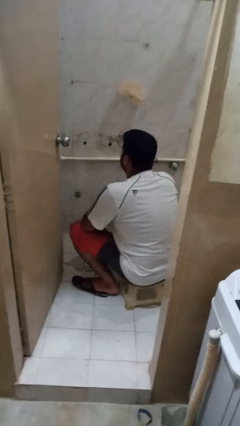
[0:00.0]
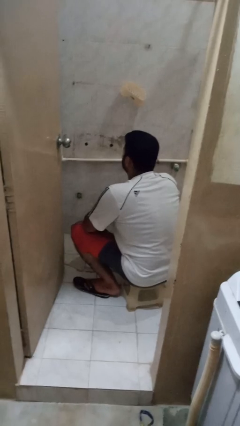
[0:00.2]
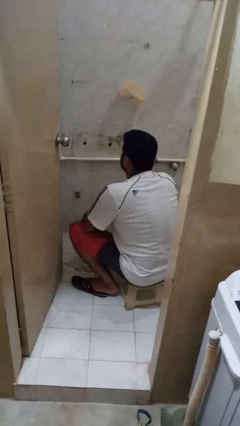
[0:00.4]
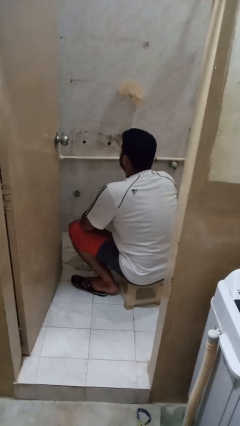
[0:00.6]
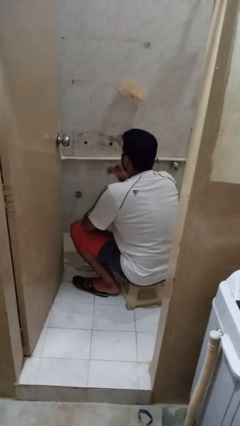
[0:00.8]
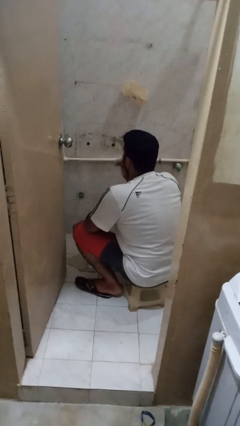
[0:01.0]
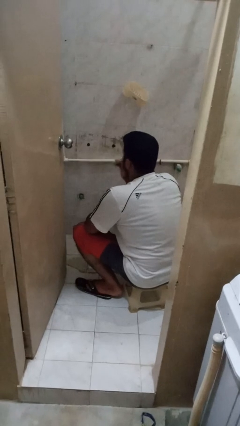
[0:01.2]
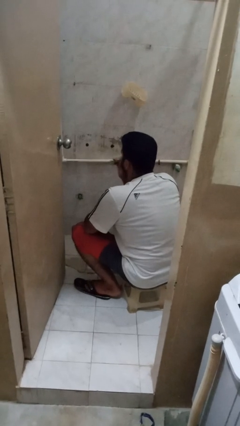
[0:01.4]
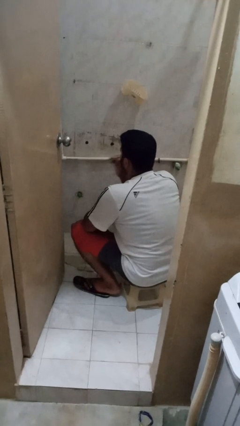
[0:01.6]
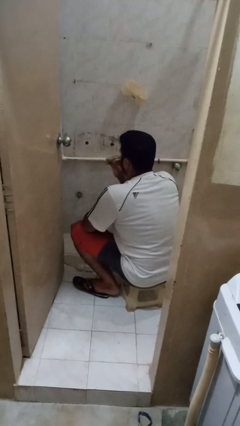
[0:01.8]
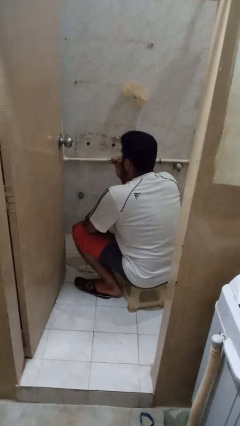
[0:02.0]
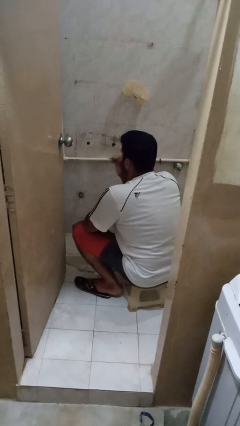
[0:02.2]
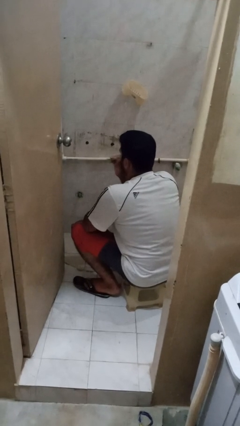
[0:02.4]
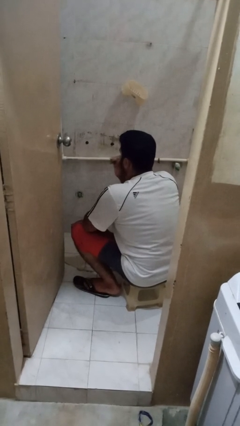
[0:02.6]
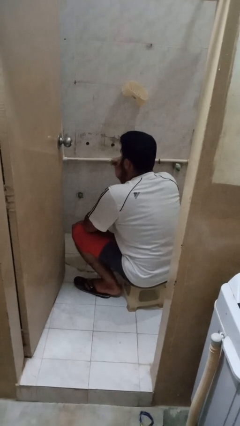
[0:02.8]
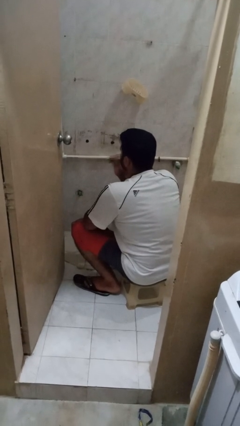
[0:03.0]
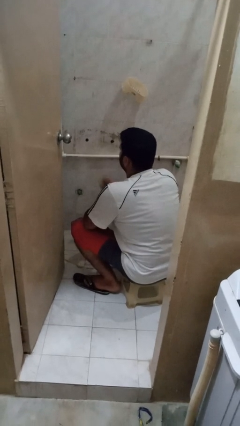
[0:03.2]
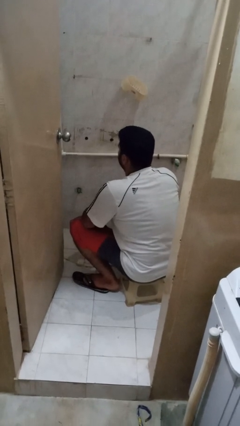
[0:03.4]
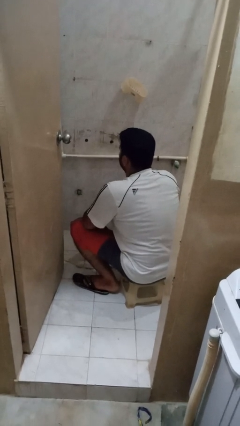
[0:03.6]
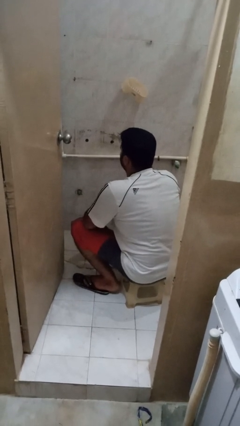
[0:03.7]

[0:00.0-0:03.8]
person brushes teeth

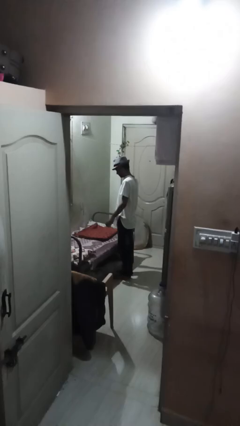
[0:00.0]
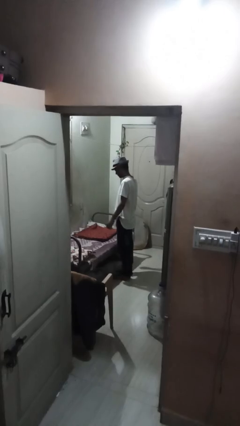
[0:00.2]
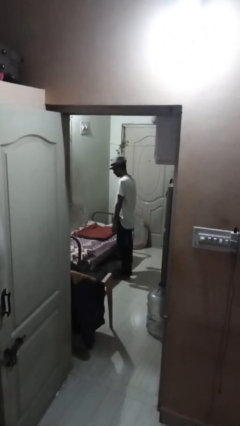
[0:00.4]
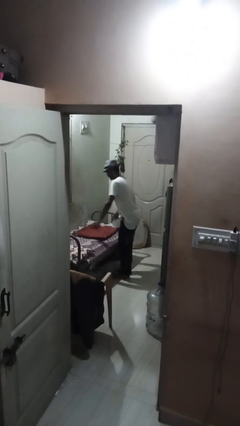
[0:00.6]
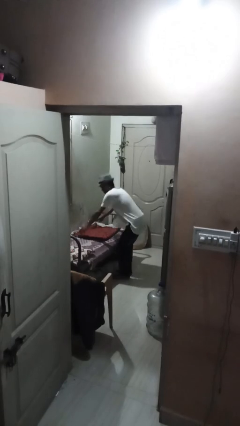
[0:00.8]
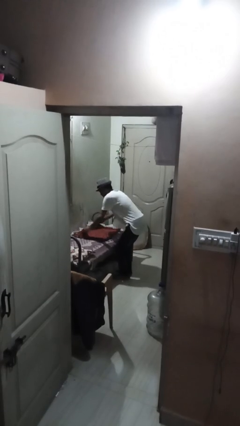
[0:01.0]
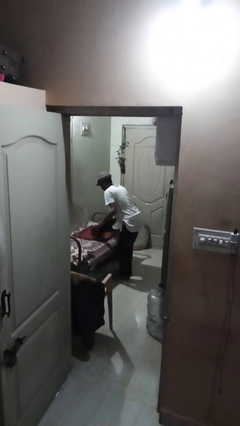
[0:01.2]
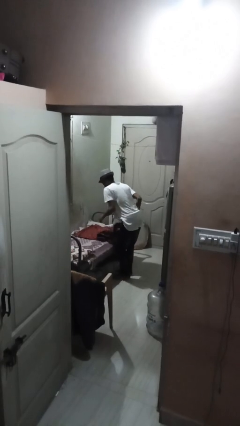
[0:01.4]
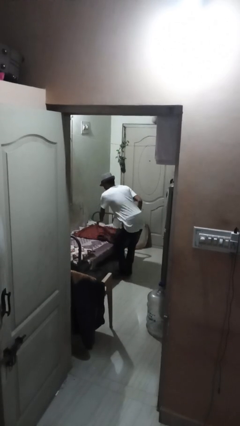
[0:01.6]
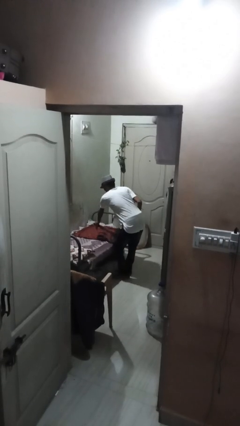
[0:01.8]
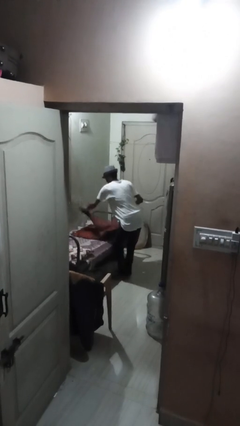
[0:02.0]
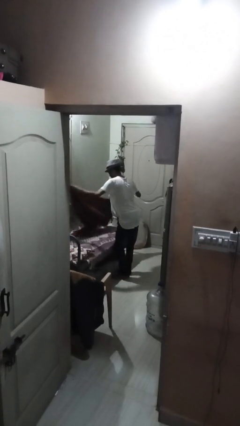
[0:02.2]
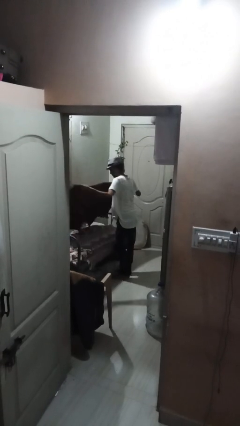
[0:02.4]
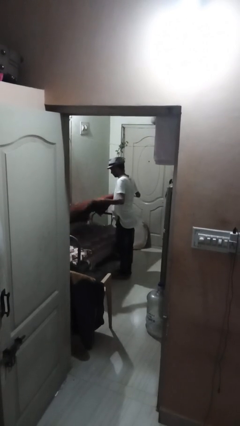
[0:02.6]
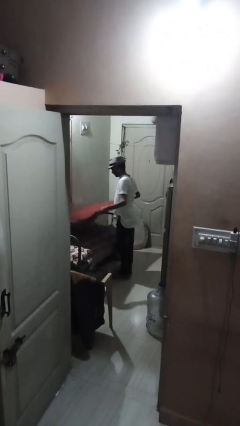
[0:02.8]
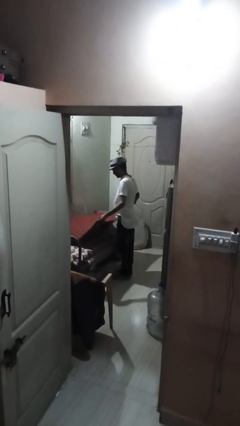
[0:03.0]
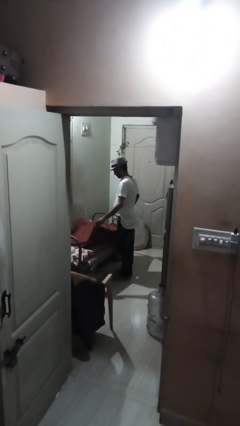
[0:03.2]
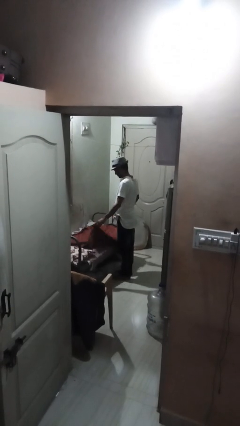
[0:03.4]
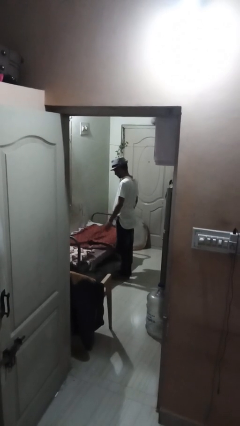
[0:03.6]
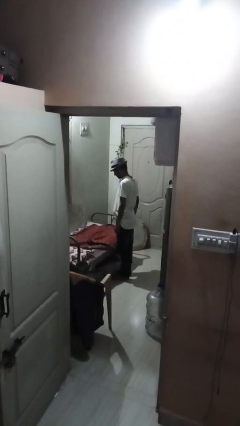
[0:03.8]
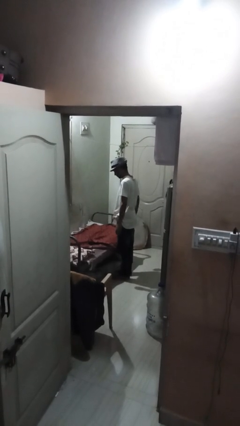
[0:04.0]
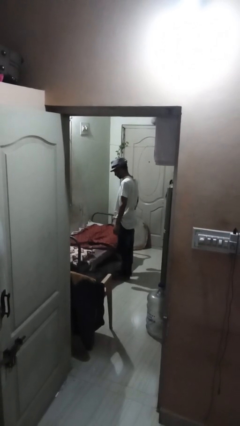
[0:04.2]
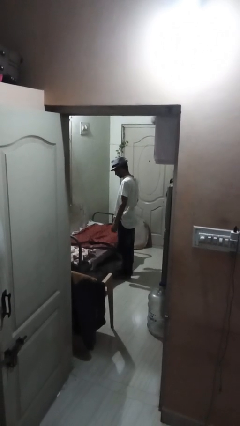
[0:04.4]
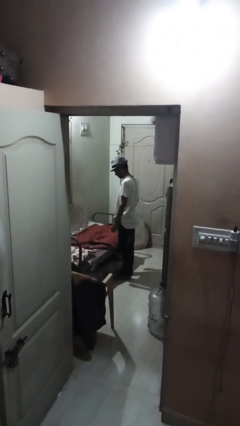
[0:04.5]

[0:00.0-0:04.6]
person unfolds blanket

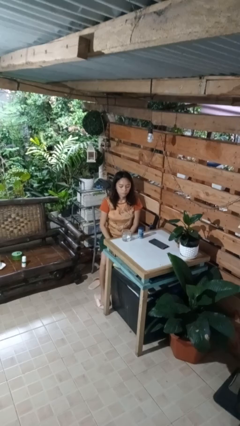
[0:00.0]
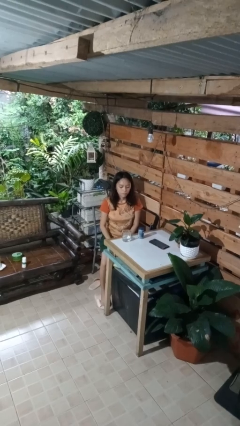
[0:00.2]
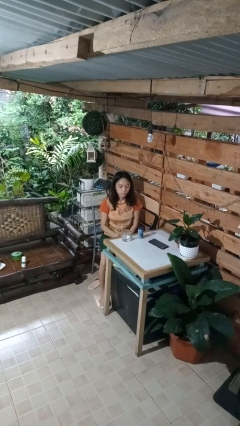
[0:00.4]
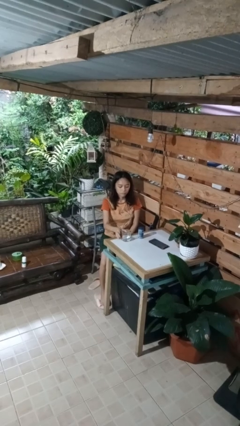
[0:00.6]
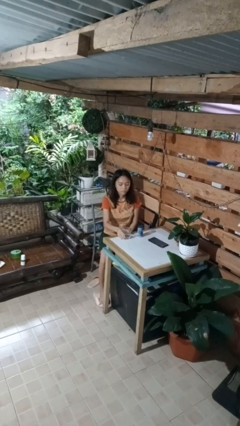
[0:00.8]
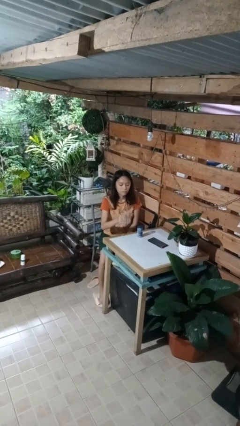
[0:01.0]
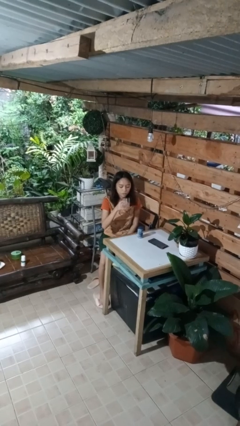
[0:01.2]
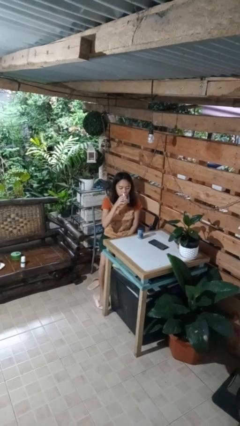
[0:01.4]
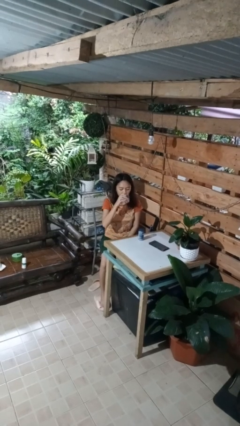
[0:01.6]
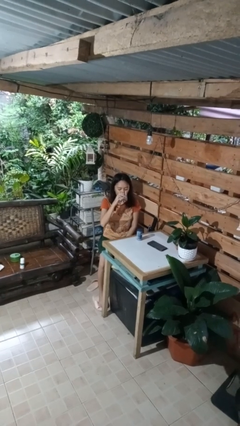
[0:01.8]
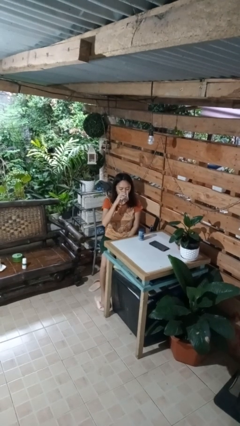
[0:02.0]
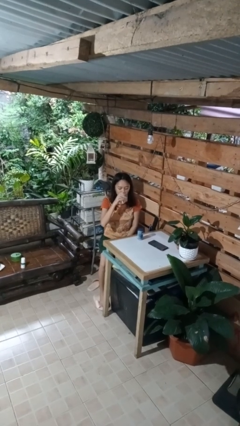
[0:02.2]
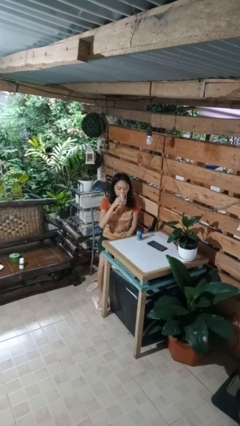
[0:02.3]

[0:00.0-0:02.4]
person drinks from cup

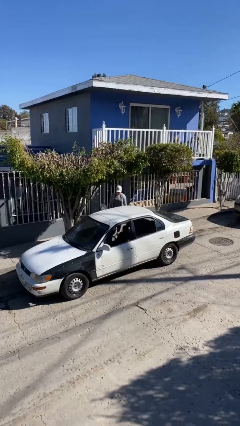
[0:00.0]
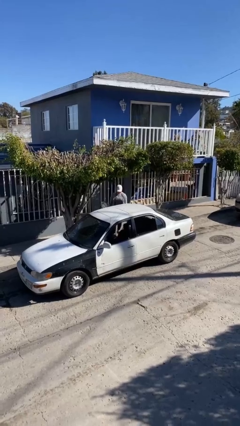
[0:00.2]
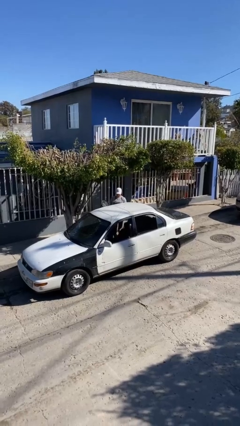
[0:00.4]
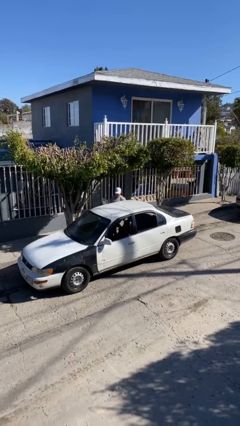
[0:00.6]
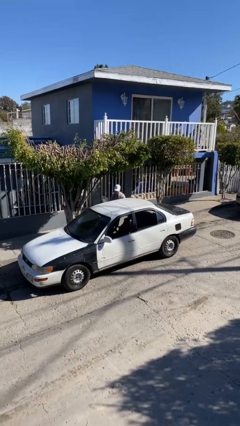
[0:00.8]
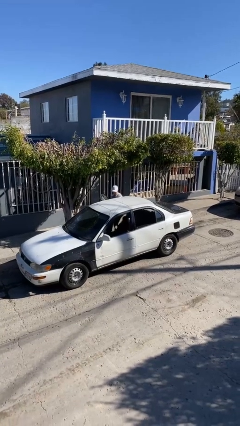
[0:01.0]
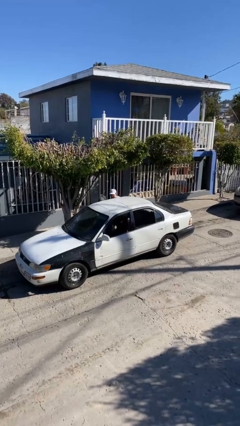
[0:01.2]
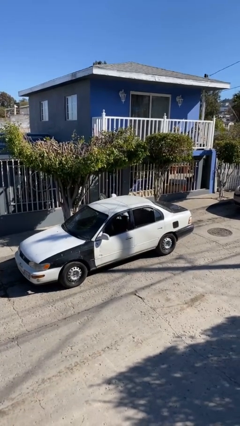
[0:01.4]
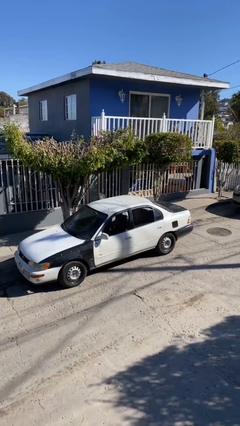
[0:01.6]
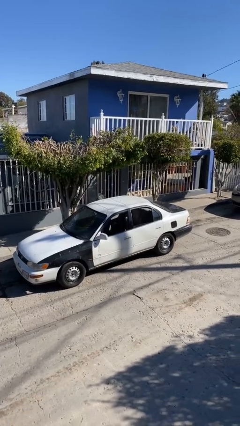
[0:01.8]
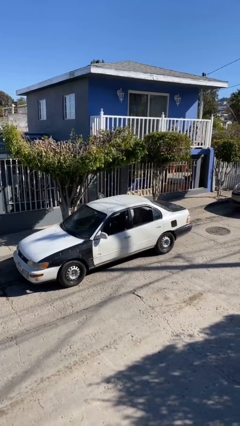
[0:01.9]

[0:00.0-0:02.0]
person enters car

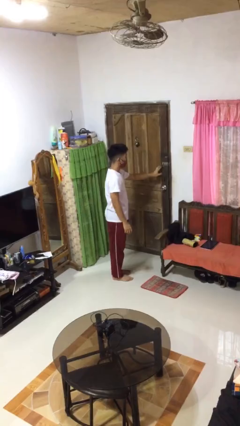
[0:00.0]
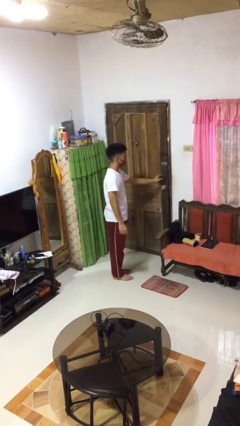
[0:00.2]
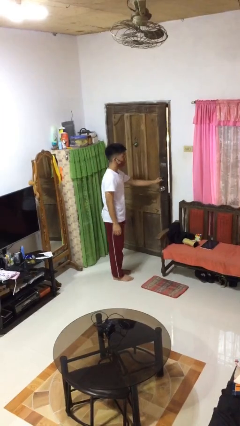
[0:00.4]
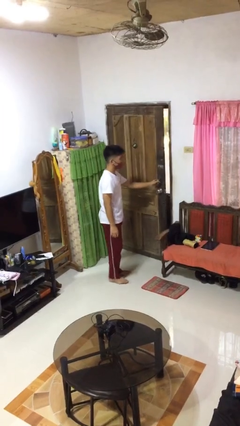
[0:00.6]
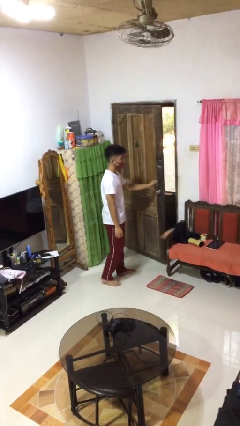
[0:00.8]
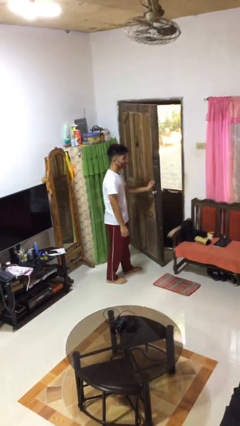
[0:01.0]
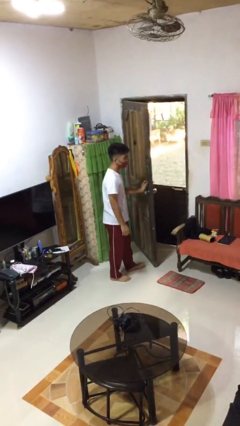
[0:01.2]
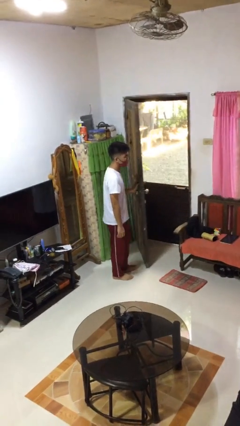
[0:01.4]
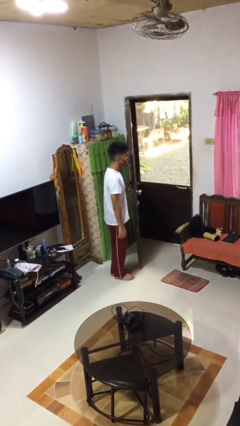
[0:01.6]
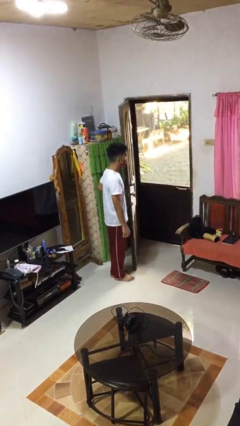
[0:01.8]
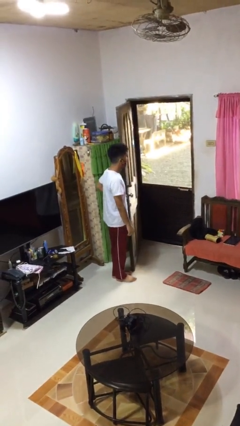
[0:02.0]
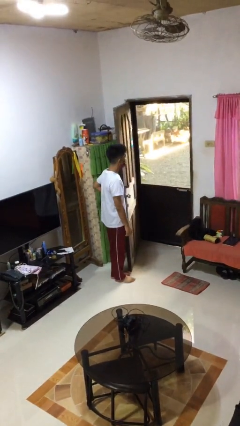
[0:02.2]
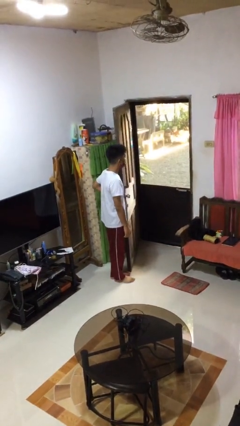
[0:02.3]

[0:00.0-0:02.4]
person opens facility door

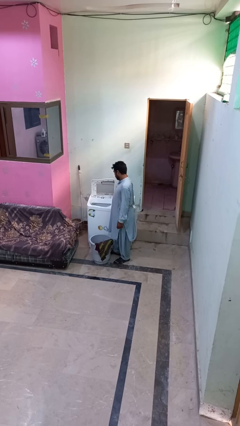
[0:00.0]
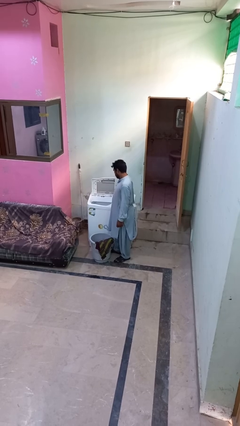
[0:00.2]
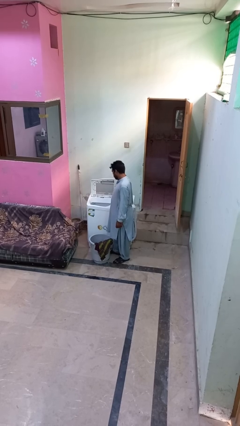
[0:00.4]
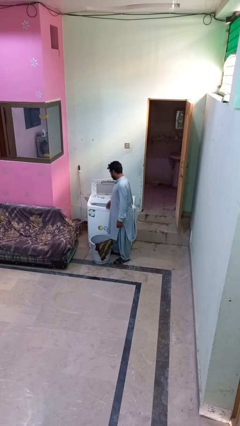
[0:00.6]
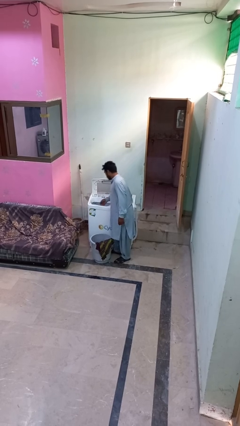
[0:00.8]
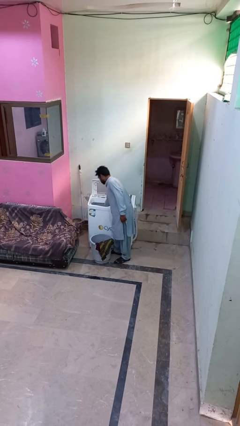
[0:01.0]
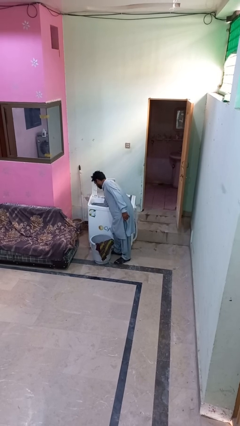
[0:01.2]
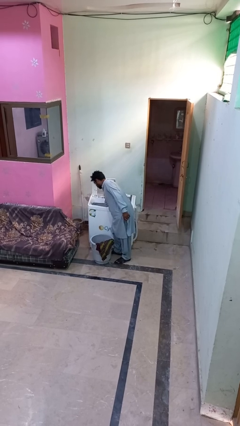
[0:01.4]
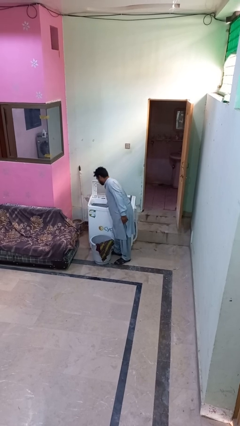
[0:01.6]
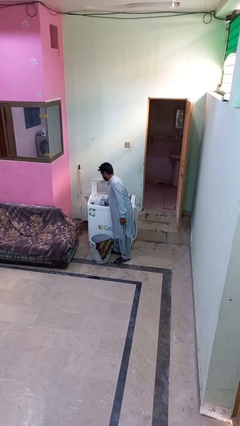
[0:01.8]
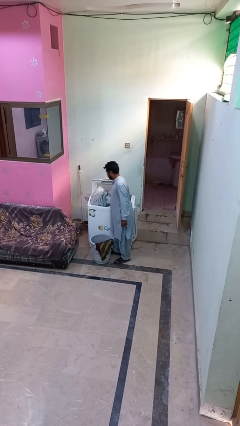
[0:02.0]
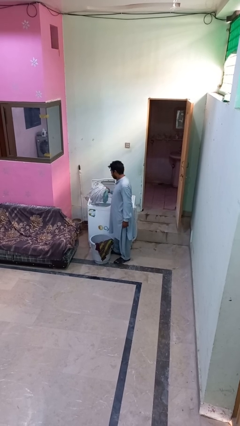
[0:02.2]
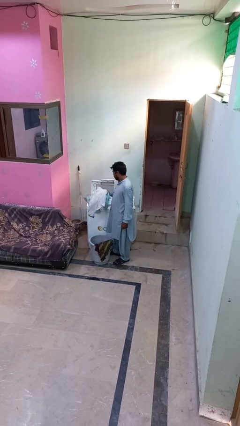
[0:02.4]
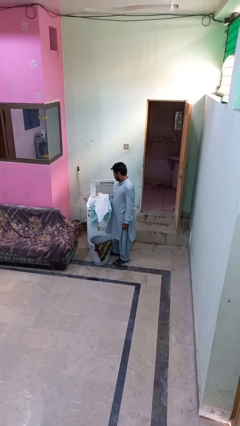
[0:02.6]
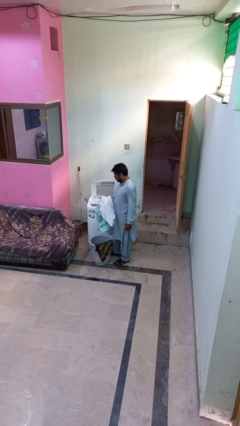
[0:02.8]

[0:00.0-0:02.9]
person unloads clotheswasher
